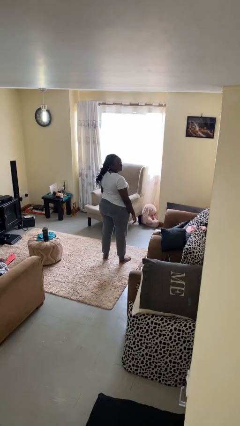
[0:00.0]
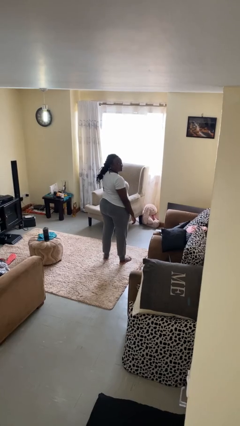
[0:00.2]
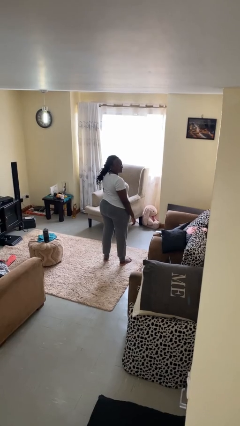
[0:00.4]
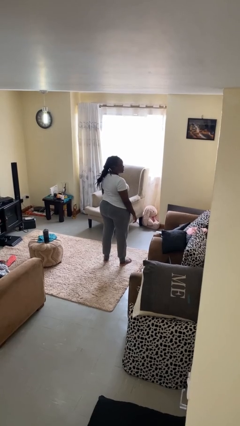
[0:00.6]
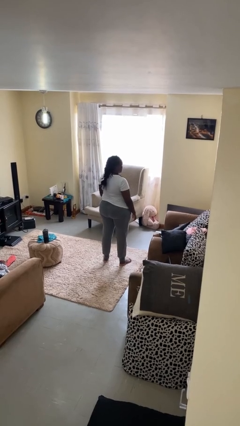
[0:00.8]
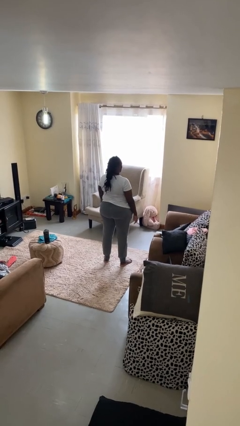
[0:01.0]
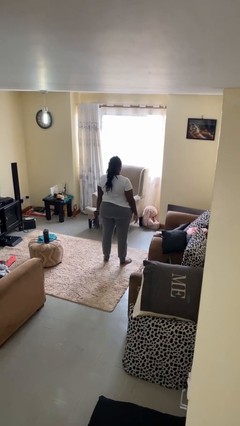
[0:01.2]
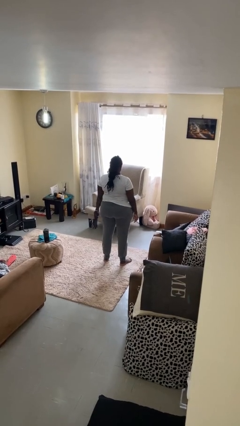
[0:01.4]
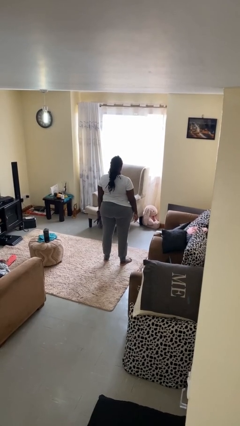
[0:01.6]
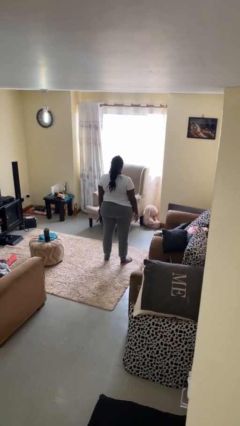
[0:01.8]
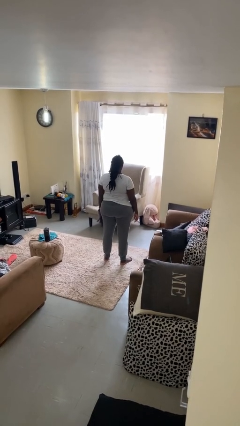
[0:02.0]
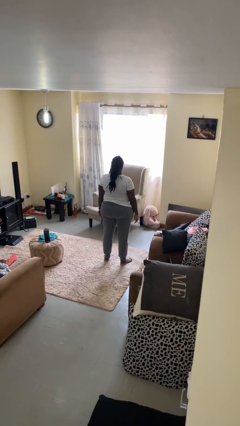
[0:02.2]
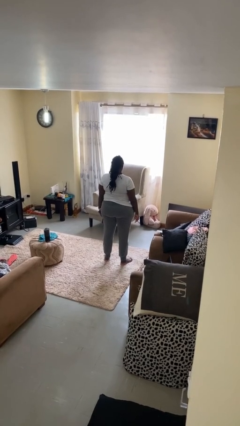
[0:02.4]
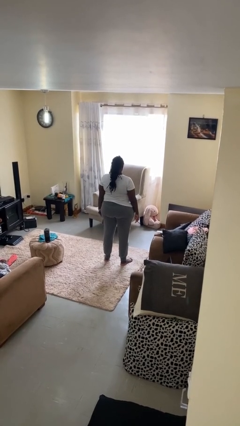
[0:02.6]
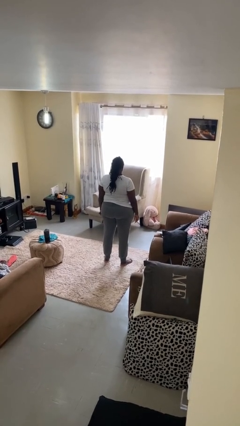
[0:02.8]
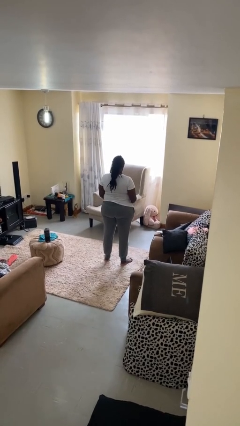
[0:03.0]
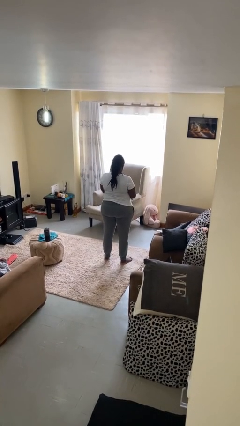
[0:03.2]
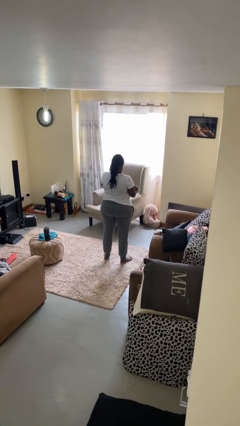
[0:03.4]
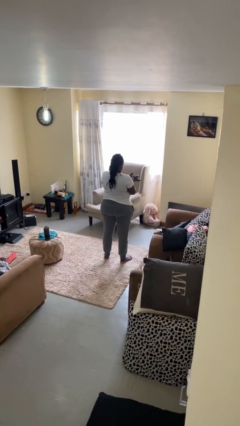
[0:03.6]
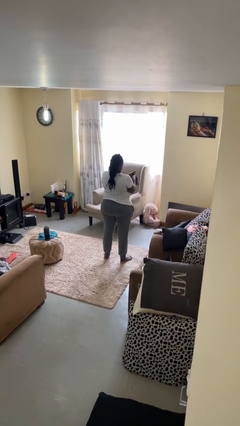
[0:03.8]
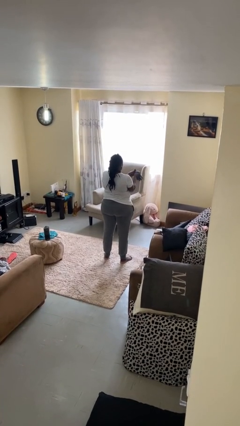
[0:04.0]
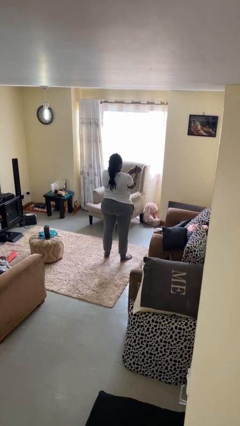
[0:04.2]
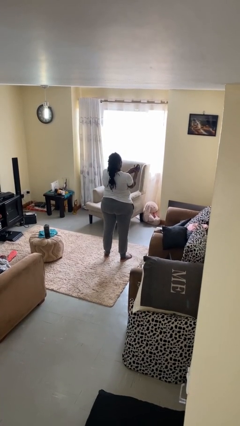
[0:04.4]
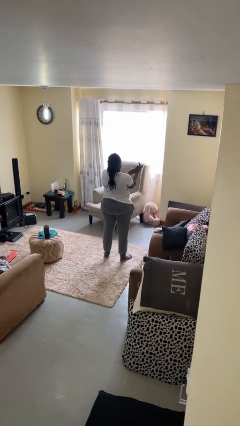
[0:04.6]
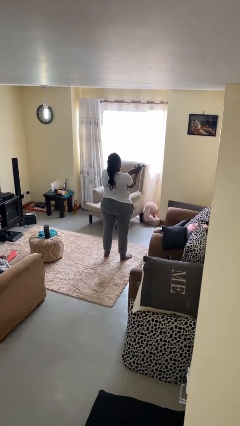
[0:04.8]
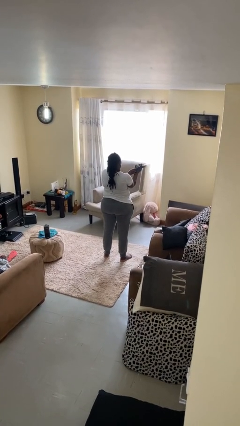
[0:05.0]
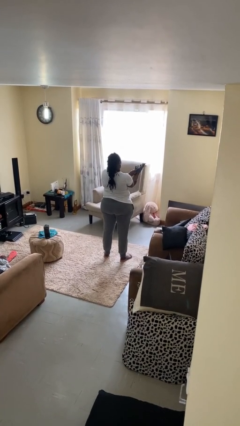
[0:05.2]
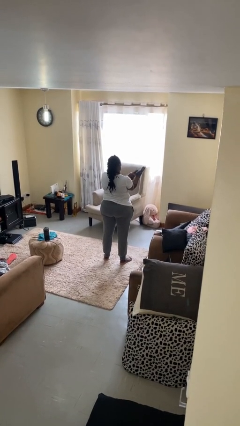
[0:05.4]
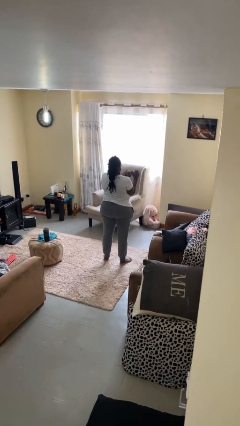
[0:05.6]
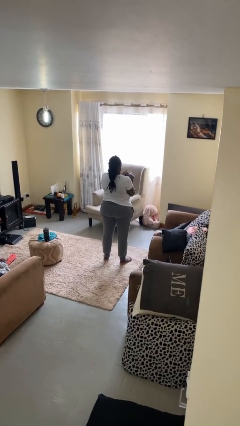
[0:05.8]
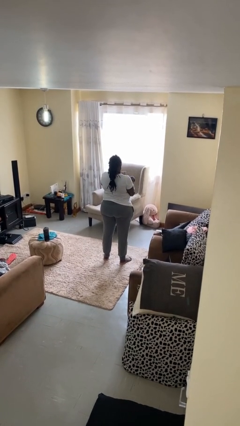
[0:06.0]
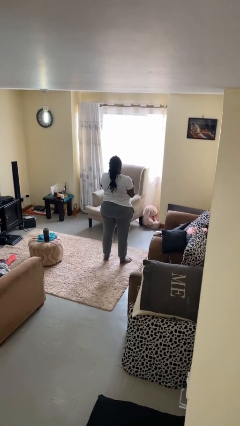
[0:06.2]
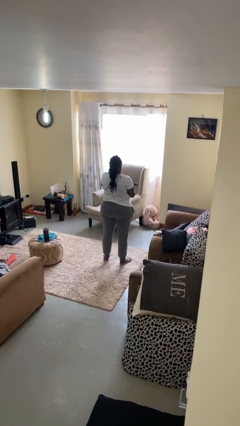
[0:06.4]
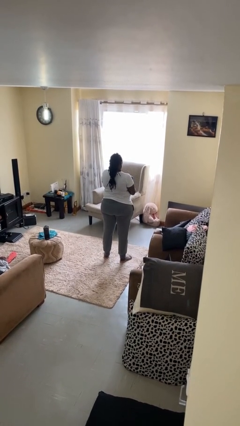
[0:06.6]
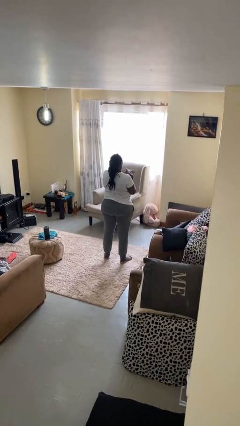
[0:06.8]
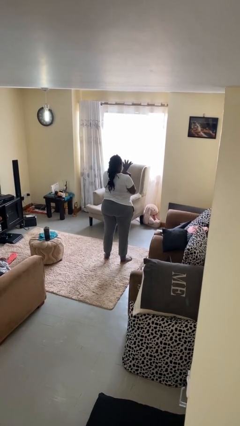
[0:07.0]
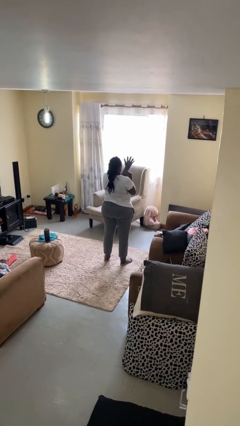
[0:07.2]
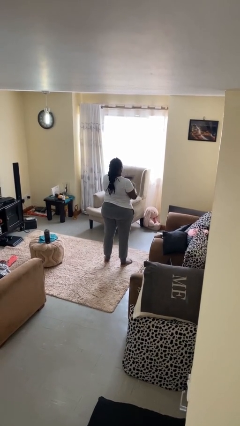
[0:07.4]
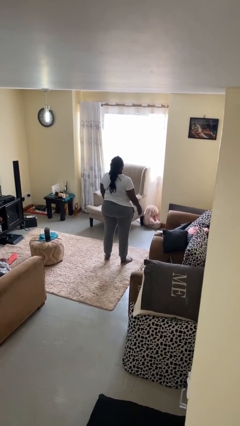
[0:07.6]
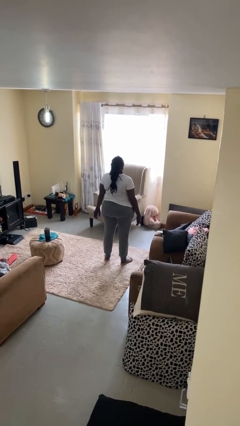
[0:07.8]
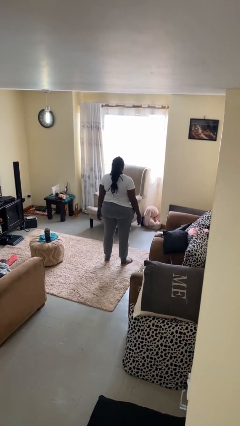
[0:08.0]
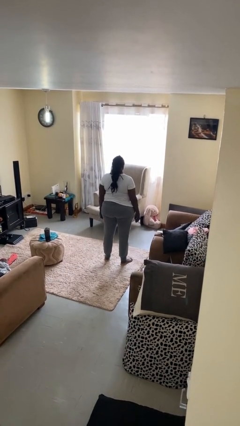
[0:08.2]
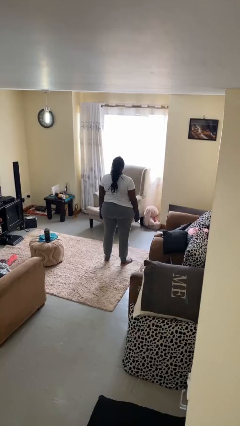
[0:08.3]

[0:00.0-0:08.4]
person puts on gloves

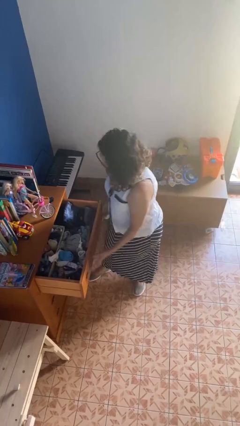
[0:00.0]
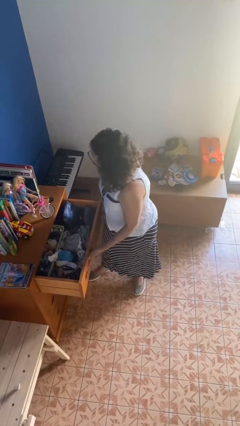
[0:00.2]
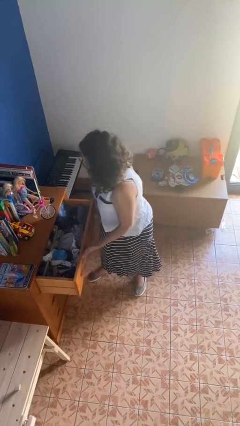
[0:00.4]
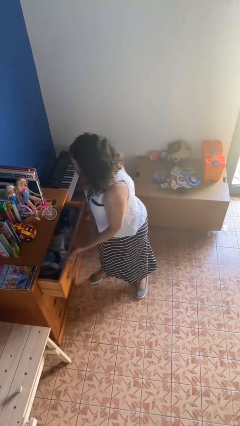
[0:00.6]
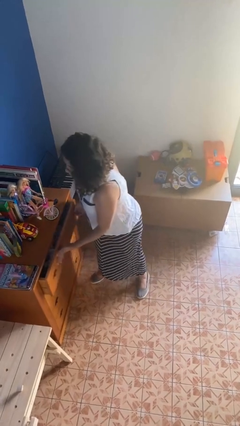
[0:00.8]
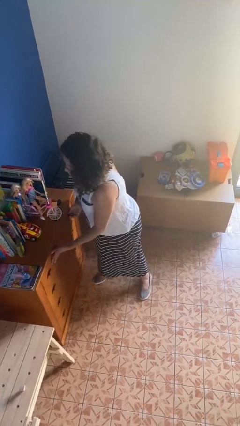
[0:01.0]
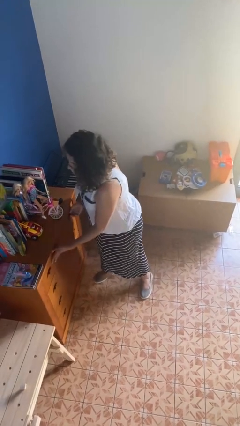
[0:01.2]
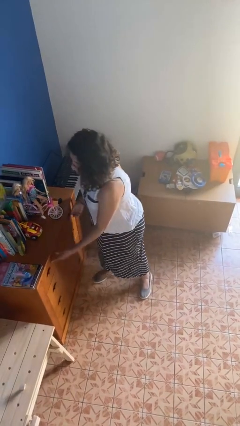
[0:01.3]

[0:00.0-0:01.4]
person closes dresser drawer

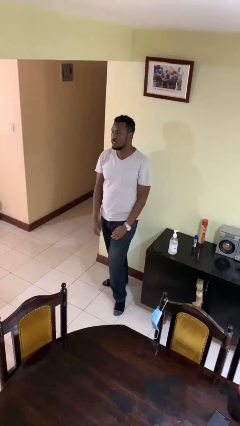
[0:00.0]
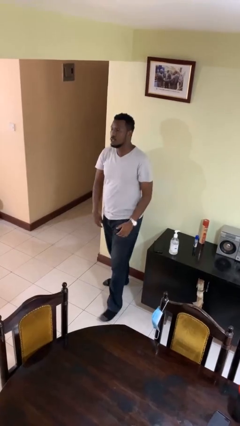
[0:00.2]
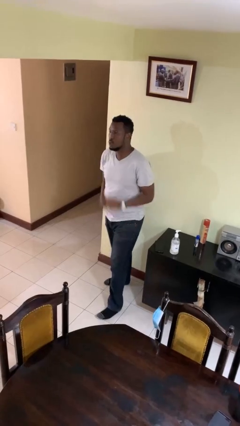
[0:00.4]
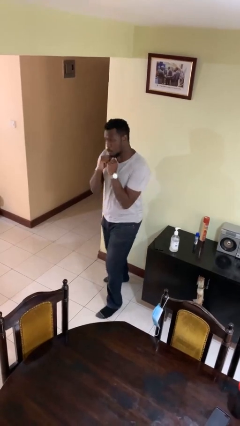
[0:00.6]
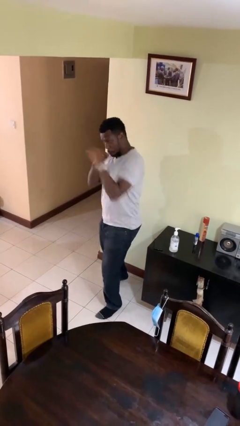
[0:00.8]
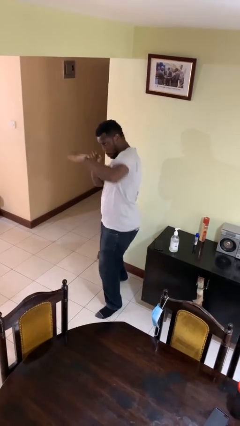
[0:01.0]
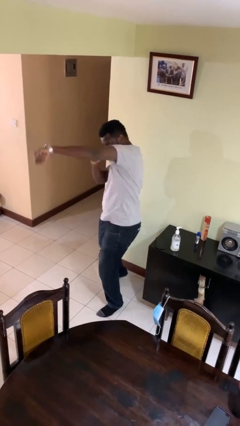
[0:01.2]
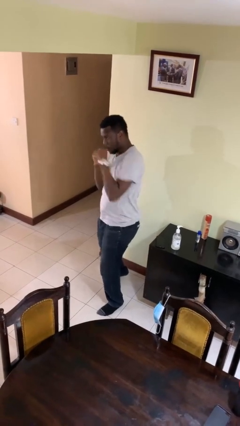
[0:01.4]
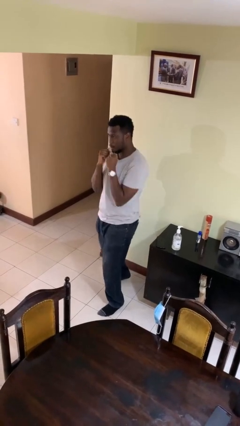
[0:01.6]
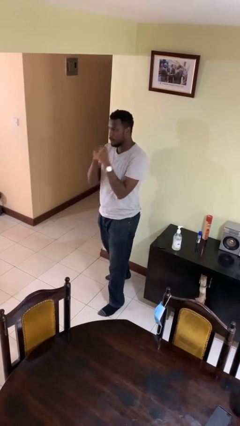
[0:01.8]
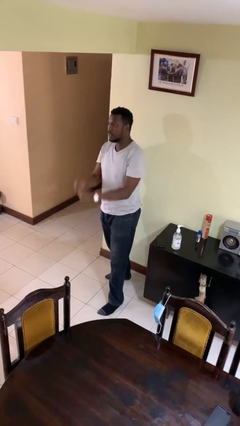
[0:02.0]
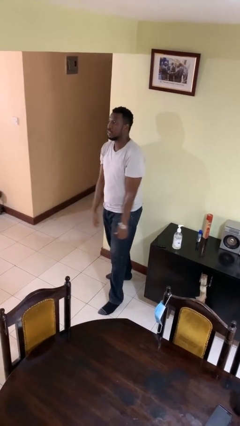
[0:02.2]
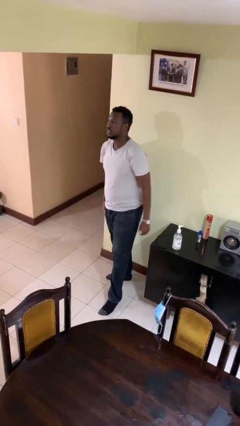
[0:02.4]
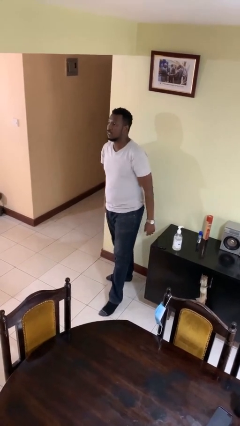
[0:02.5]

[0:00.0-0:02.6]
person punches

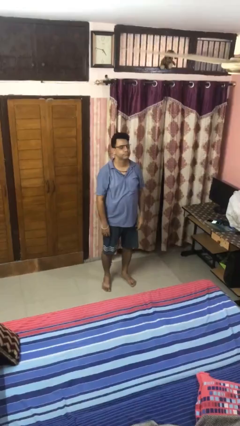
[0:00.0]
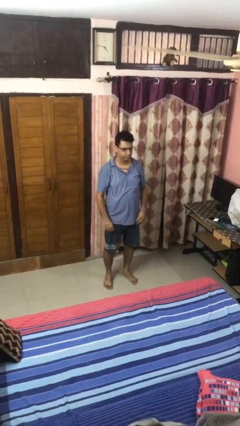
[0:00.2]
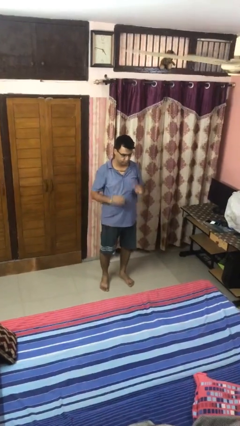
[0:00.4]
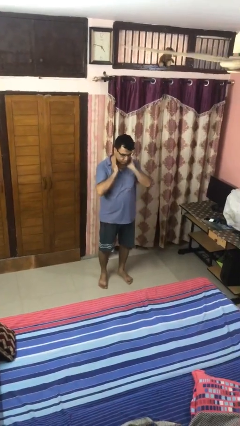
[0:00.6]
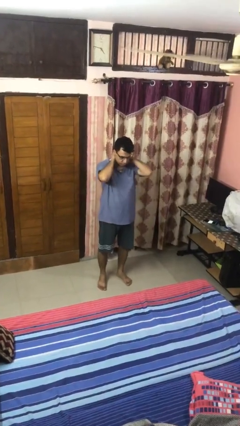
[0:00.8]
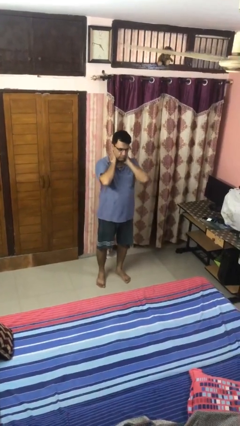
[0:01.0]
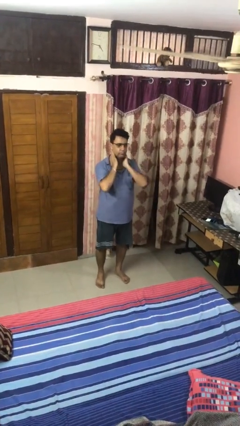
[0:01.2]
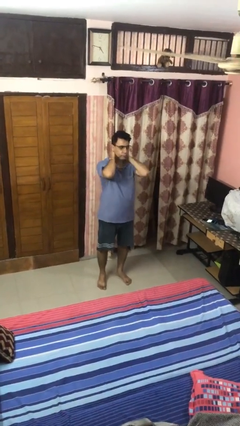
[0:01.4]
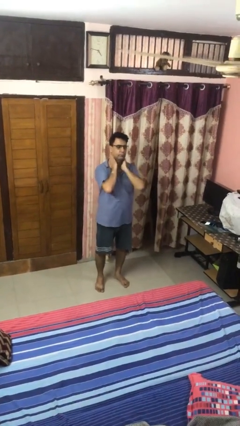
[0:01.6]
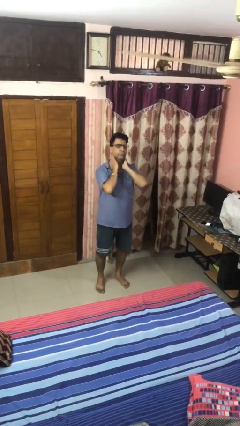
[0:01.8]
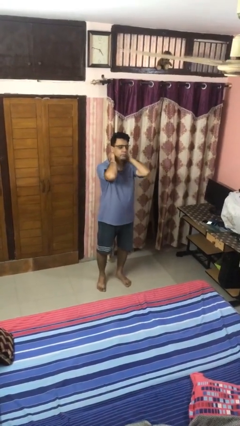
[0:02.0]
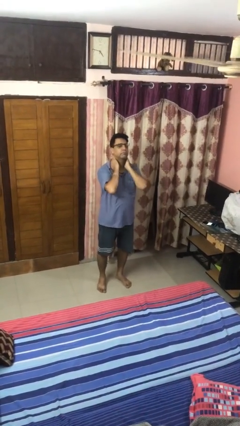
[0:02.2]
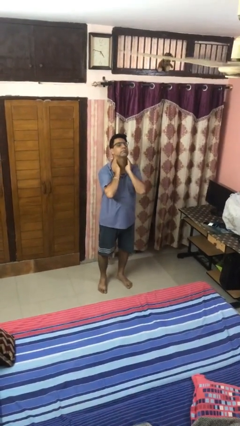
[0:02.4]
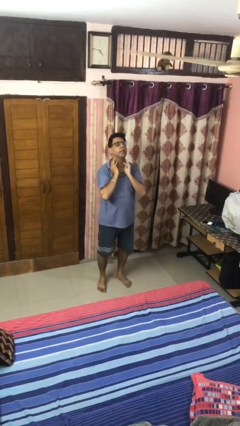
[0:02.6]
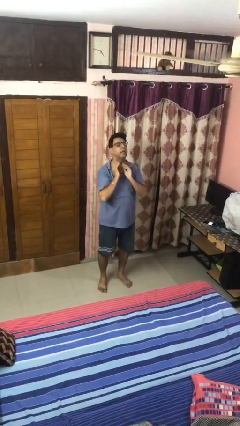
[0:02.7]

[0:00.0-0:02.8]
person rubs neck

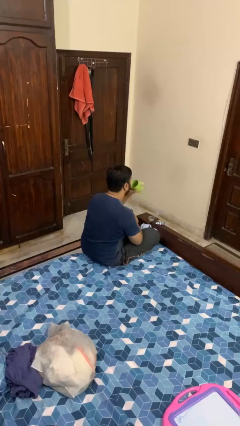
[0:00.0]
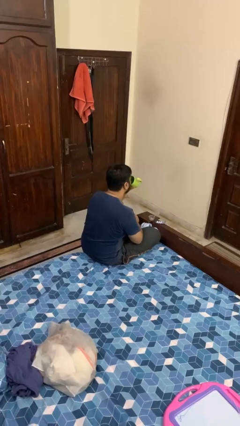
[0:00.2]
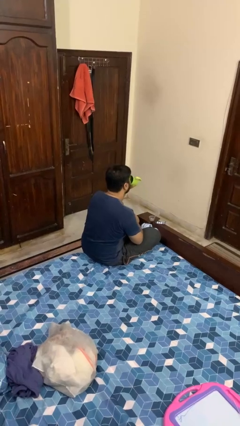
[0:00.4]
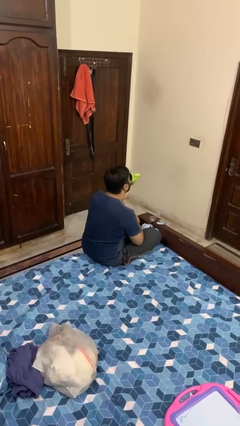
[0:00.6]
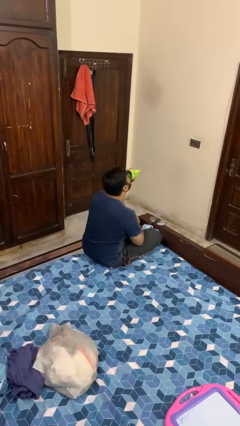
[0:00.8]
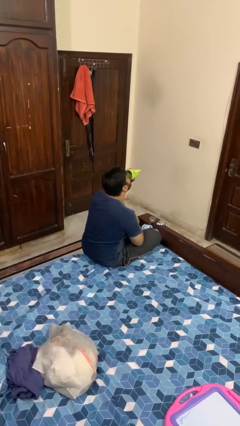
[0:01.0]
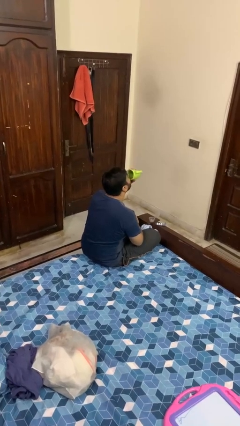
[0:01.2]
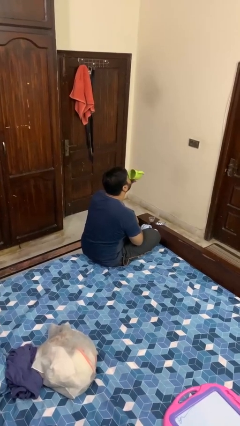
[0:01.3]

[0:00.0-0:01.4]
person drinks from cup

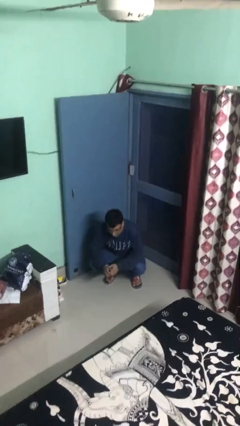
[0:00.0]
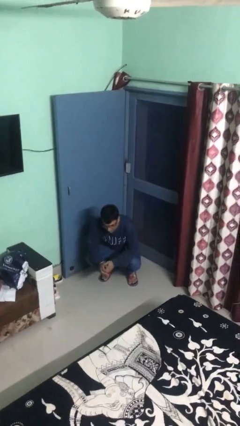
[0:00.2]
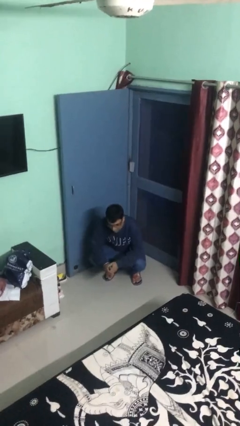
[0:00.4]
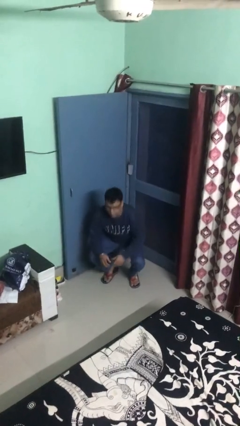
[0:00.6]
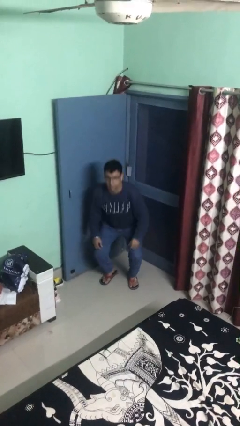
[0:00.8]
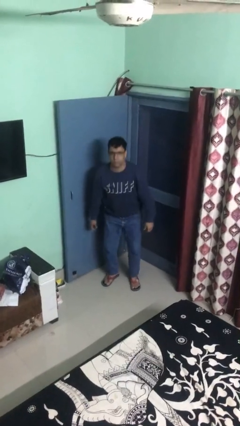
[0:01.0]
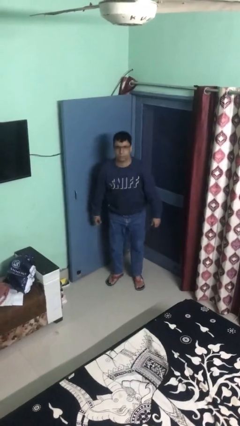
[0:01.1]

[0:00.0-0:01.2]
person stands up
